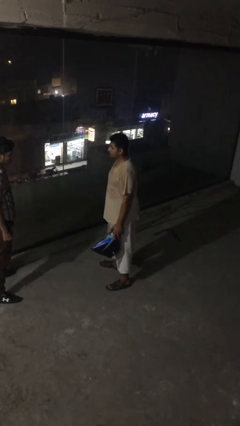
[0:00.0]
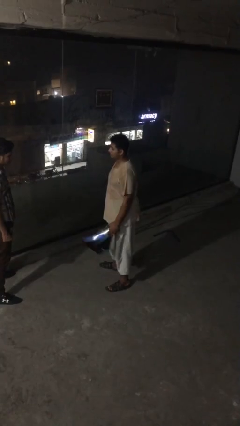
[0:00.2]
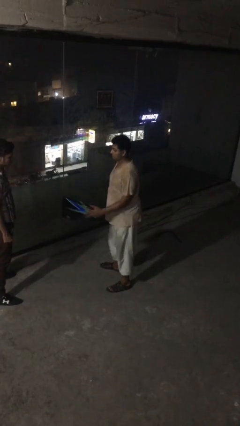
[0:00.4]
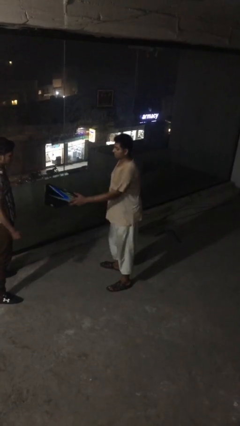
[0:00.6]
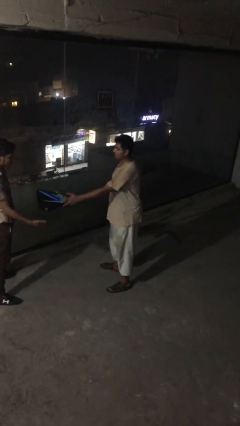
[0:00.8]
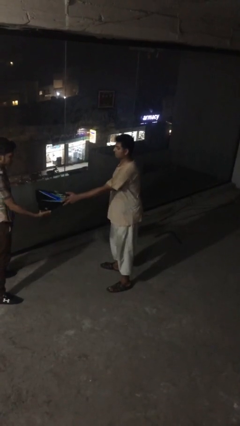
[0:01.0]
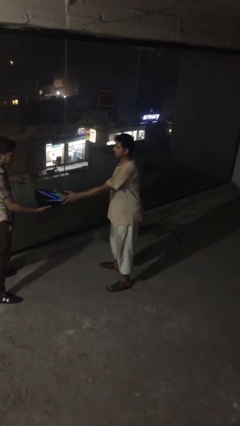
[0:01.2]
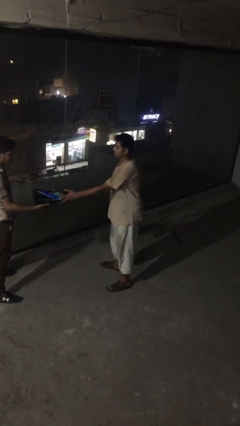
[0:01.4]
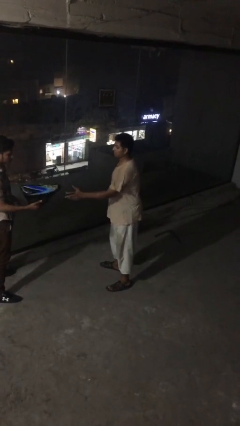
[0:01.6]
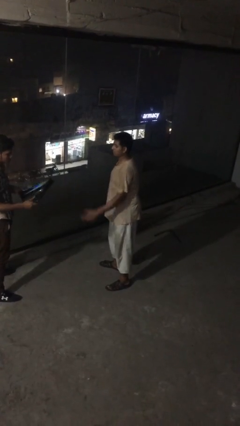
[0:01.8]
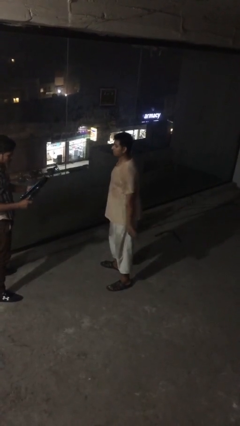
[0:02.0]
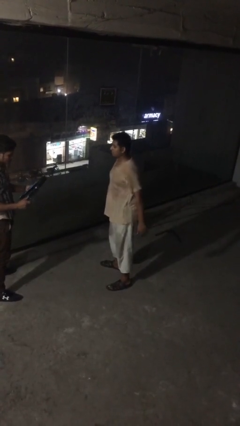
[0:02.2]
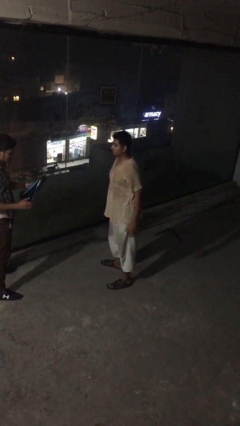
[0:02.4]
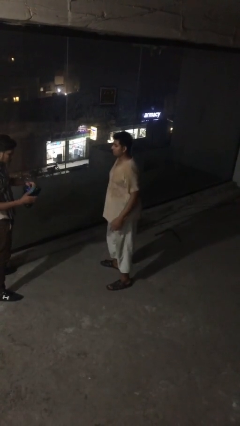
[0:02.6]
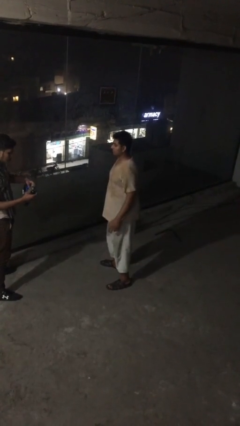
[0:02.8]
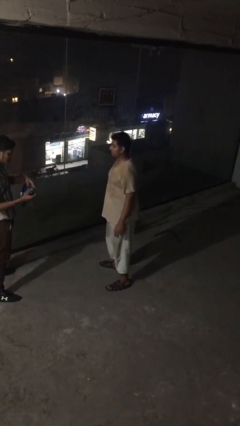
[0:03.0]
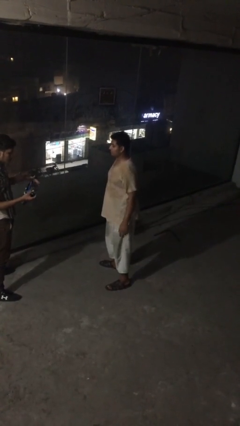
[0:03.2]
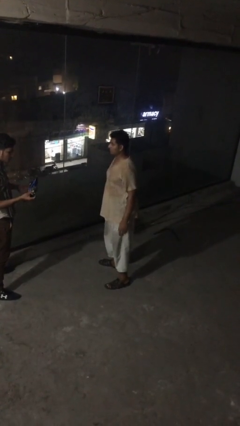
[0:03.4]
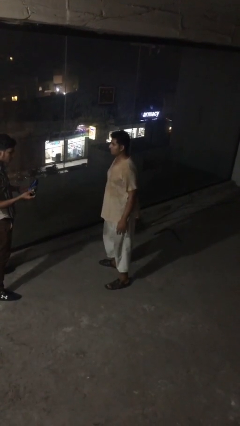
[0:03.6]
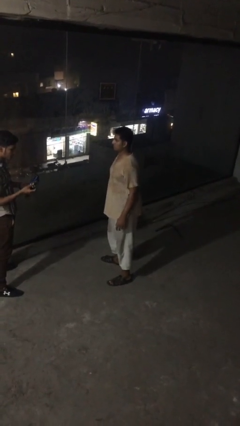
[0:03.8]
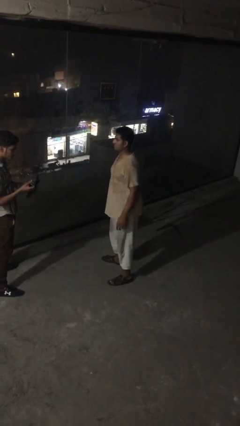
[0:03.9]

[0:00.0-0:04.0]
person transfers object to person

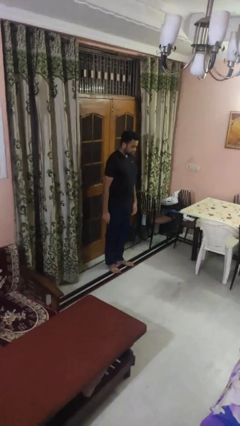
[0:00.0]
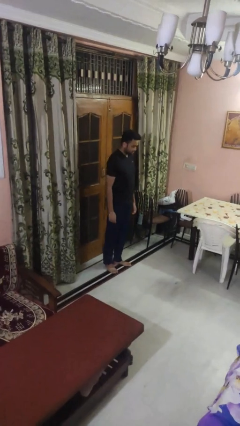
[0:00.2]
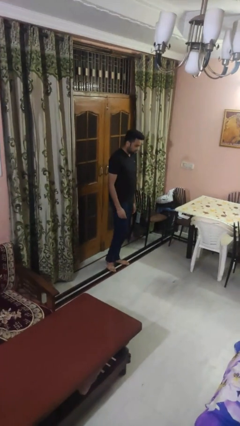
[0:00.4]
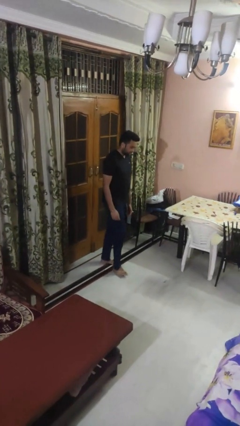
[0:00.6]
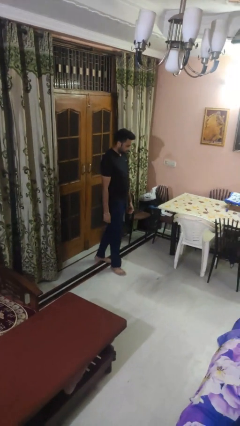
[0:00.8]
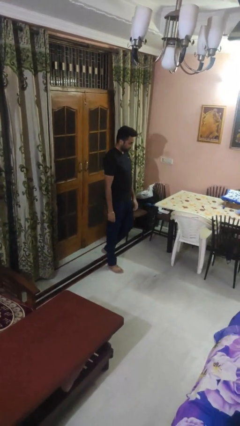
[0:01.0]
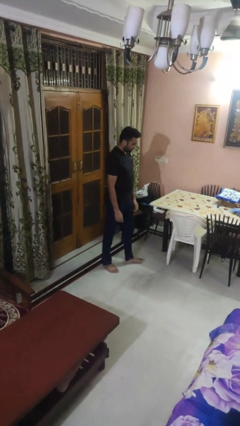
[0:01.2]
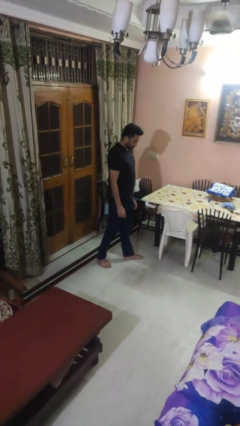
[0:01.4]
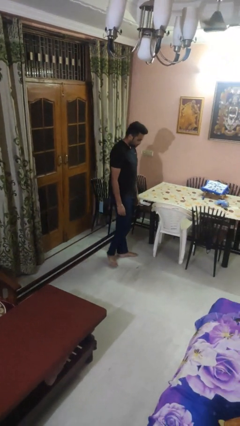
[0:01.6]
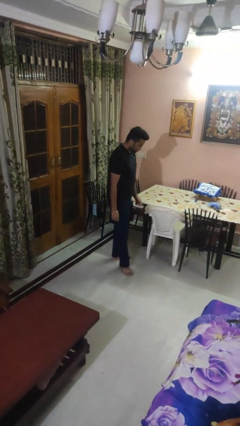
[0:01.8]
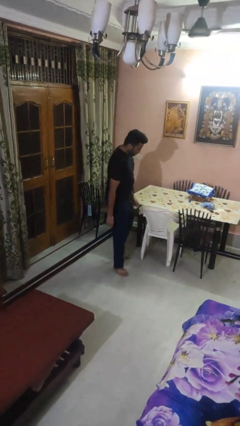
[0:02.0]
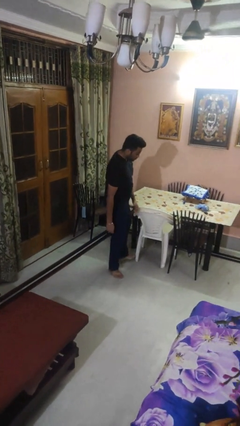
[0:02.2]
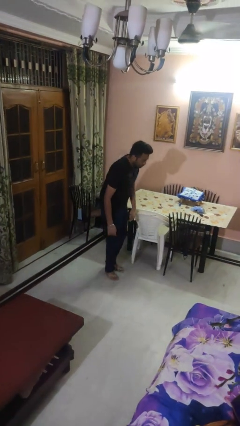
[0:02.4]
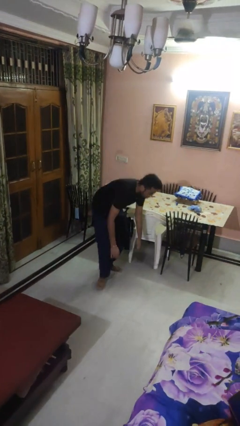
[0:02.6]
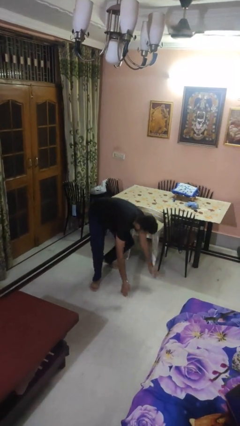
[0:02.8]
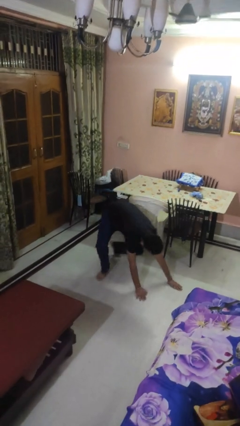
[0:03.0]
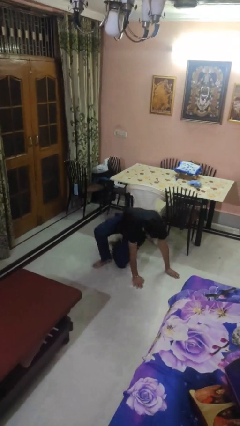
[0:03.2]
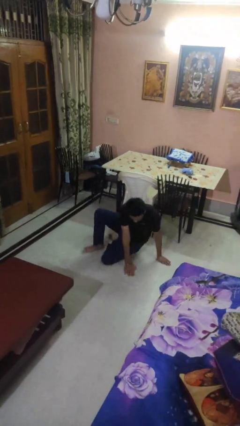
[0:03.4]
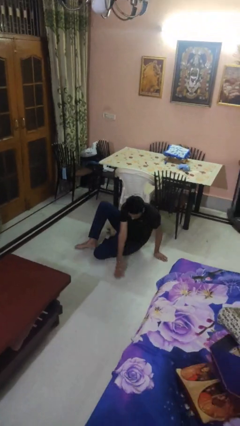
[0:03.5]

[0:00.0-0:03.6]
person trips on object on floor

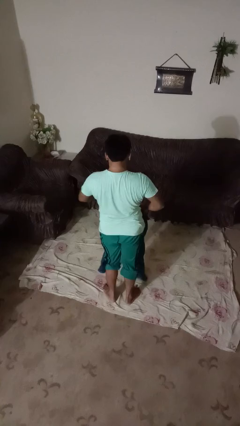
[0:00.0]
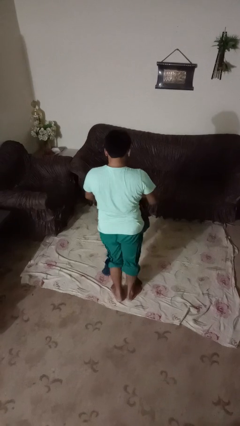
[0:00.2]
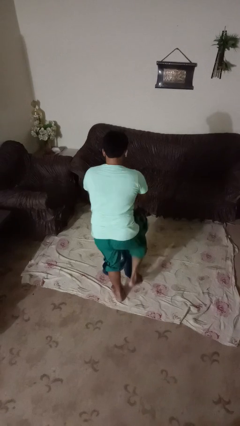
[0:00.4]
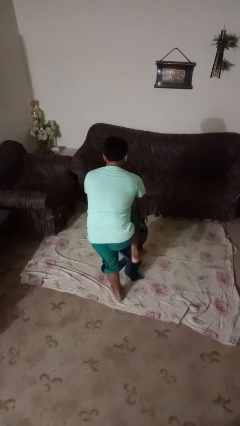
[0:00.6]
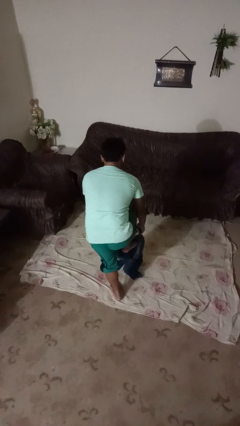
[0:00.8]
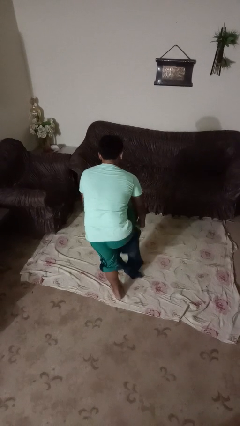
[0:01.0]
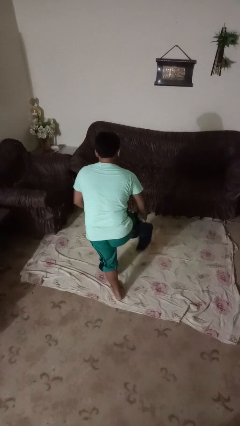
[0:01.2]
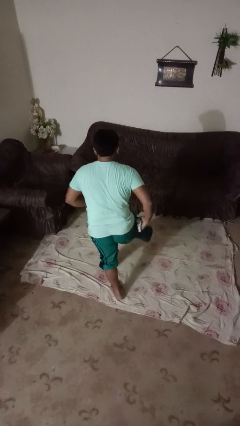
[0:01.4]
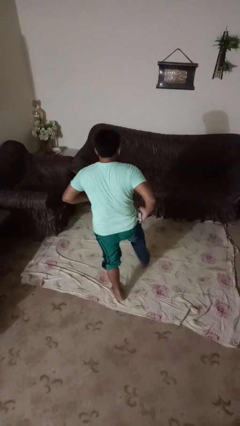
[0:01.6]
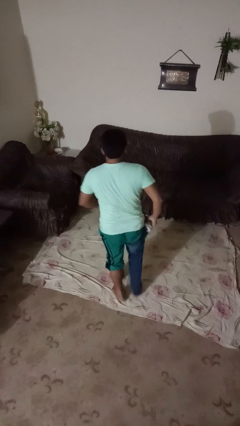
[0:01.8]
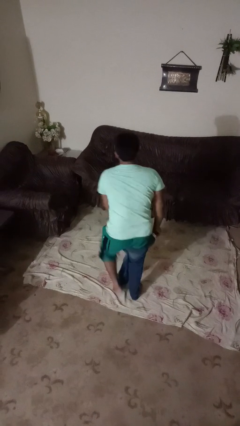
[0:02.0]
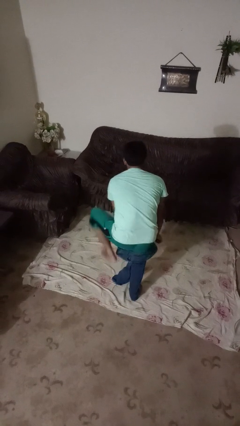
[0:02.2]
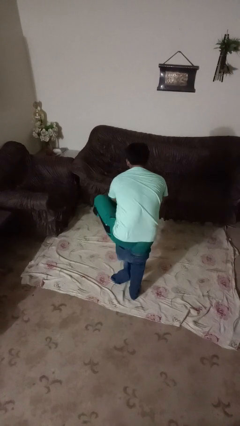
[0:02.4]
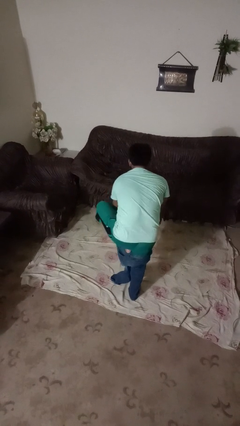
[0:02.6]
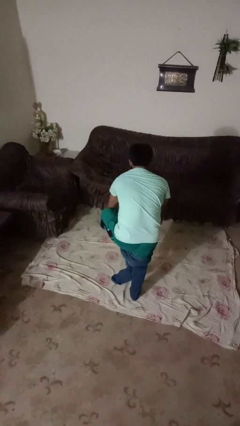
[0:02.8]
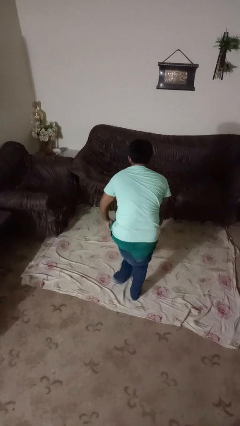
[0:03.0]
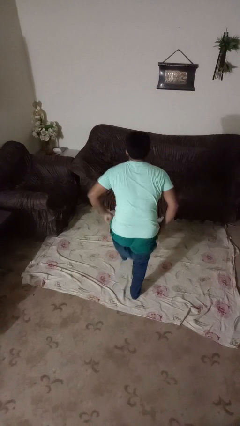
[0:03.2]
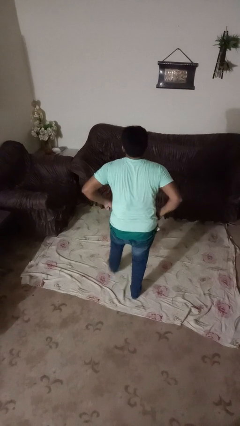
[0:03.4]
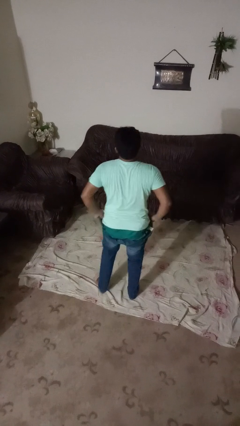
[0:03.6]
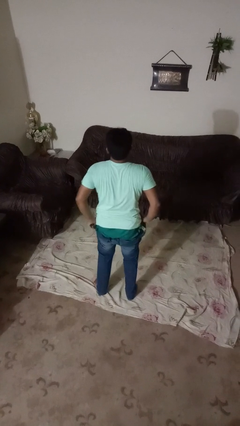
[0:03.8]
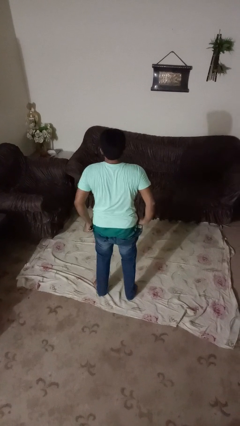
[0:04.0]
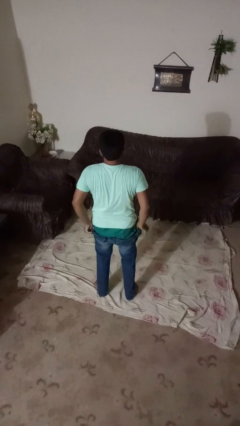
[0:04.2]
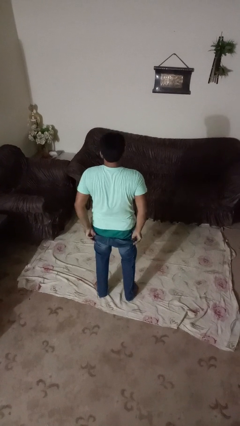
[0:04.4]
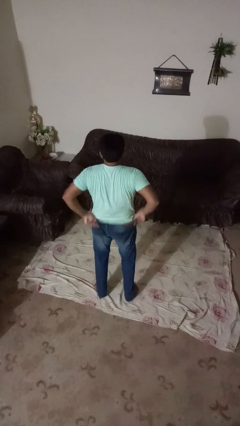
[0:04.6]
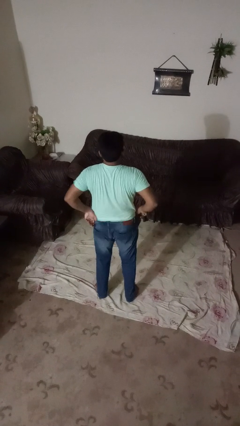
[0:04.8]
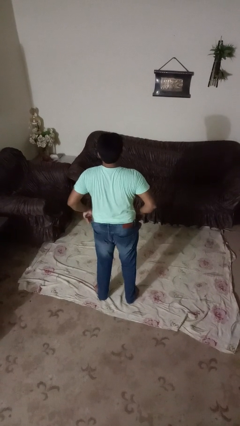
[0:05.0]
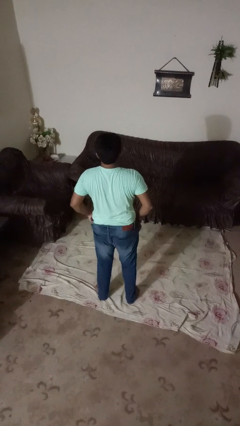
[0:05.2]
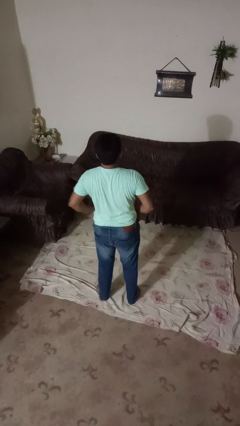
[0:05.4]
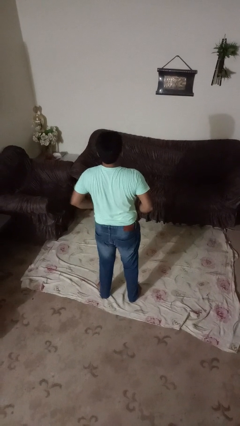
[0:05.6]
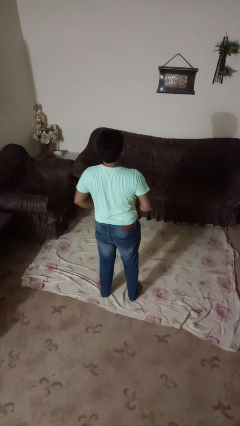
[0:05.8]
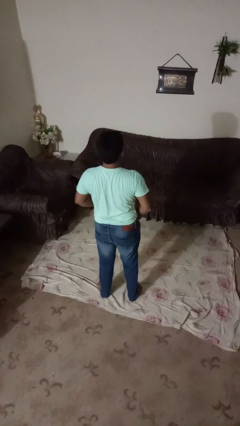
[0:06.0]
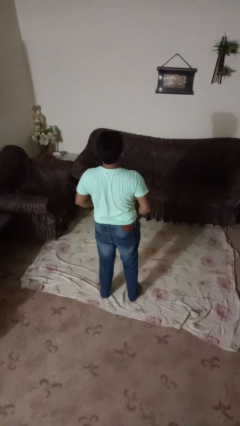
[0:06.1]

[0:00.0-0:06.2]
person puts on pants

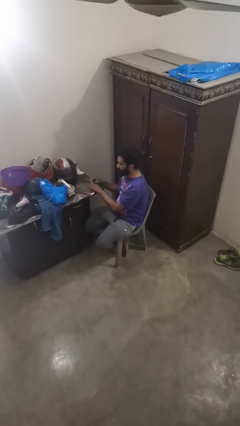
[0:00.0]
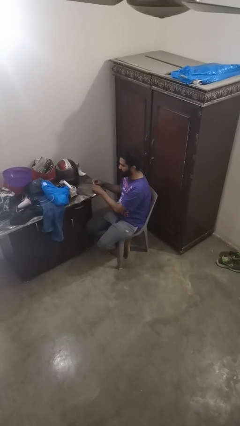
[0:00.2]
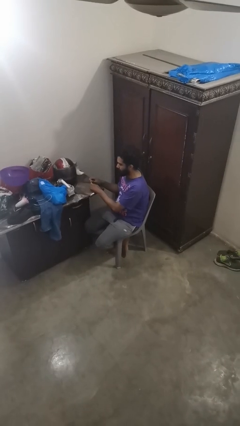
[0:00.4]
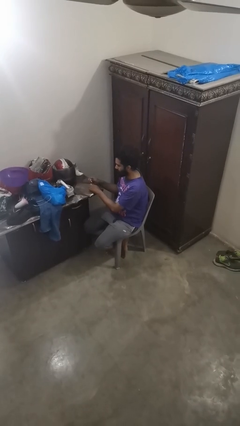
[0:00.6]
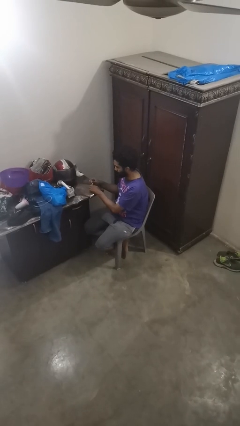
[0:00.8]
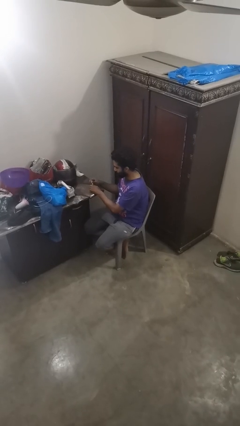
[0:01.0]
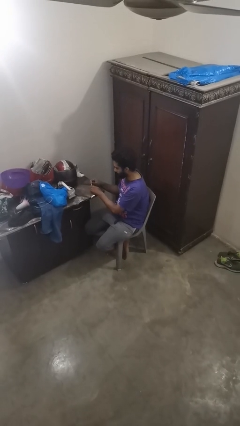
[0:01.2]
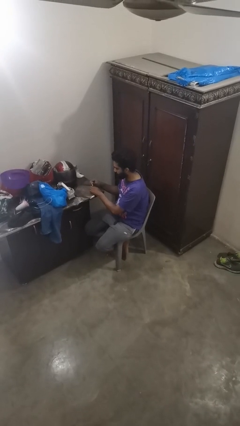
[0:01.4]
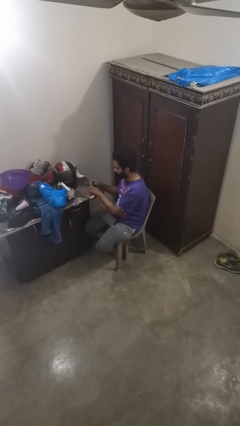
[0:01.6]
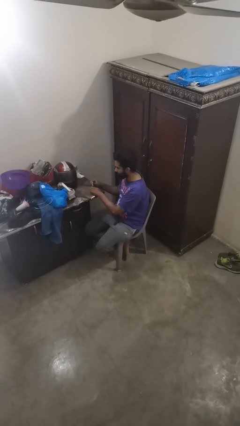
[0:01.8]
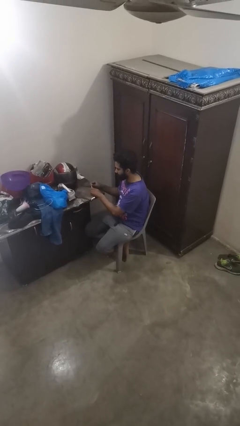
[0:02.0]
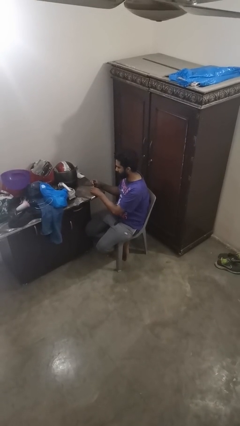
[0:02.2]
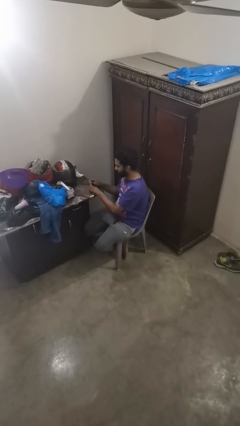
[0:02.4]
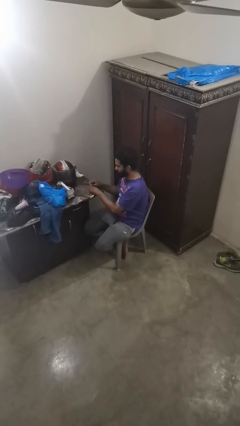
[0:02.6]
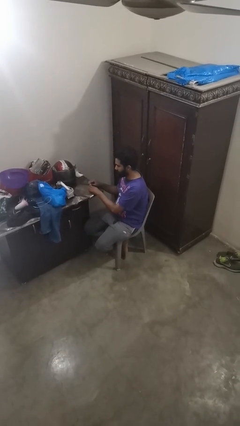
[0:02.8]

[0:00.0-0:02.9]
person paints fingernails

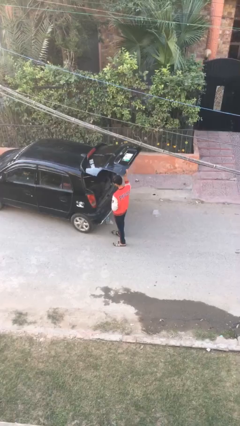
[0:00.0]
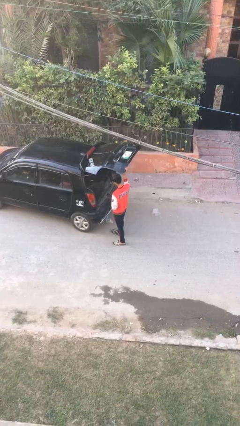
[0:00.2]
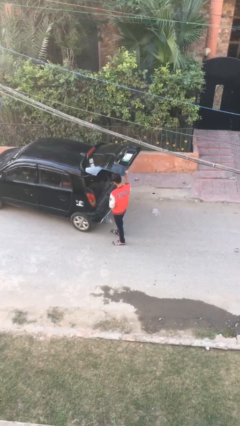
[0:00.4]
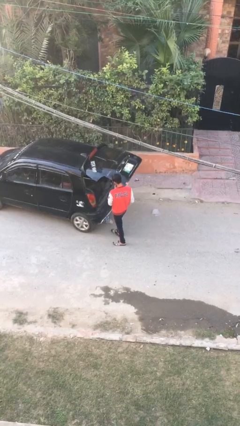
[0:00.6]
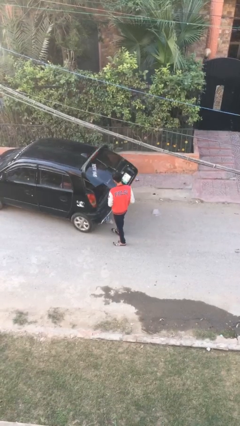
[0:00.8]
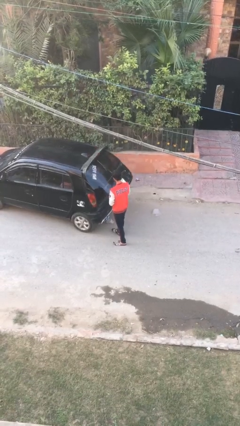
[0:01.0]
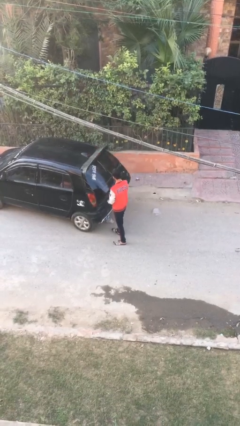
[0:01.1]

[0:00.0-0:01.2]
person closes car trunk
